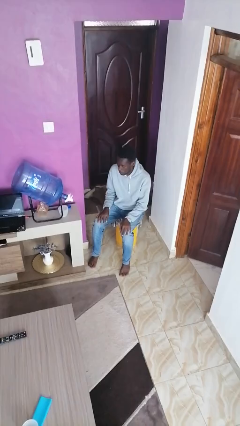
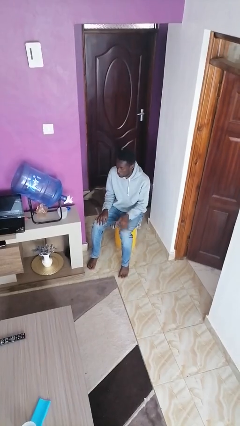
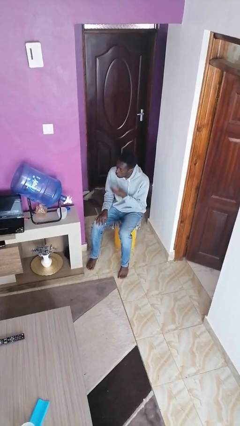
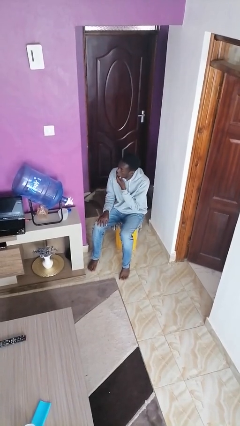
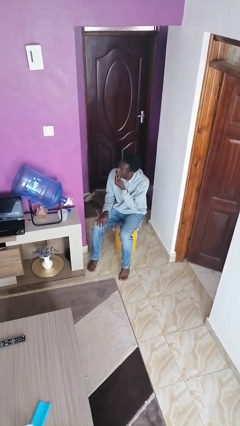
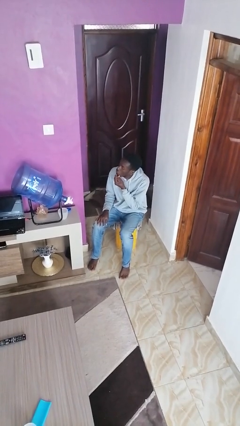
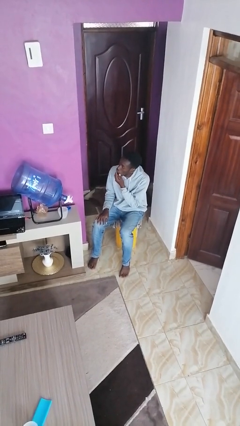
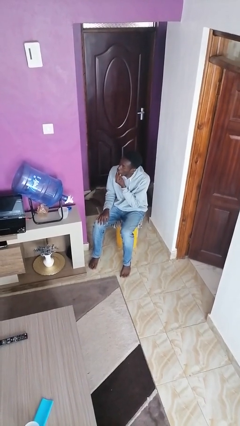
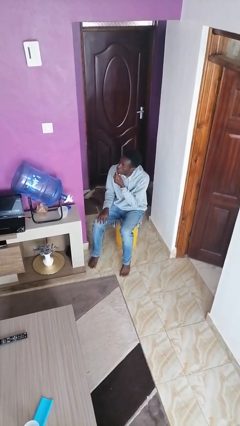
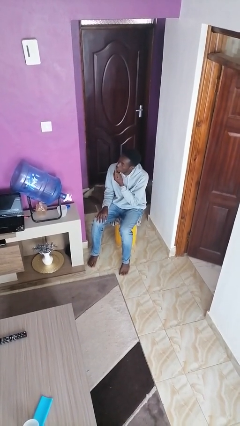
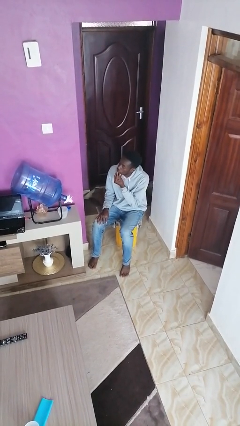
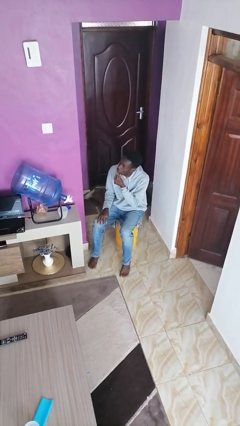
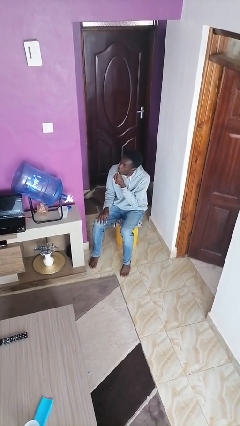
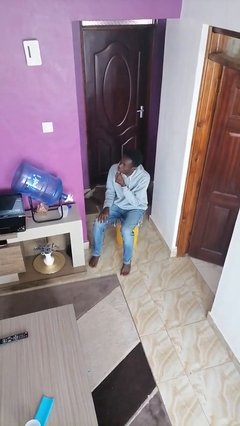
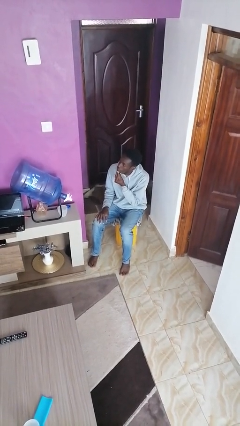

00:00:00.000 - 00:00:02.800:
person strokes chin

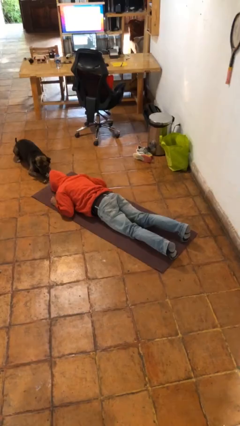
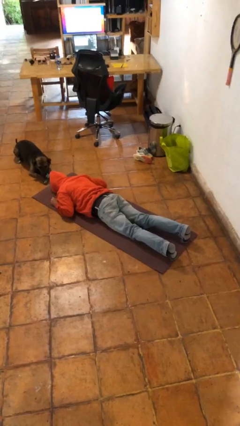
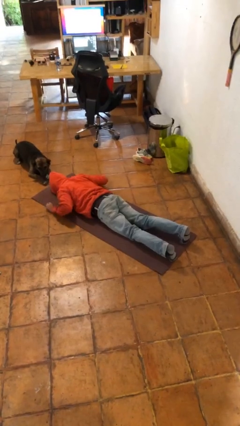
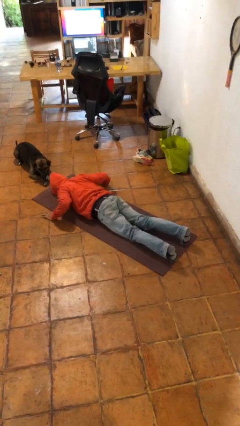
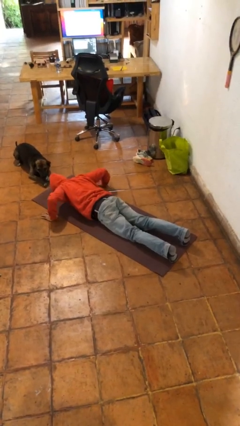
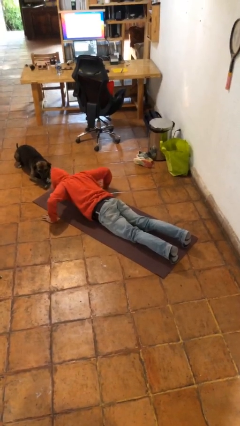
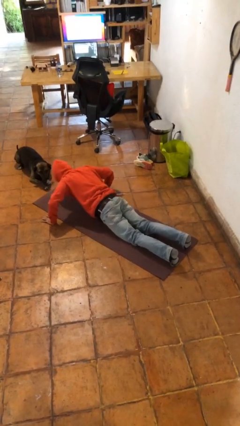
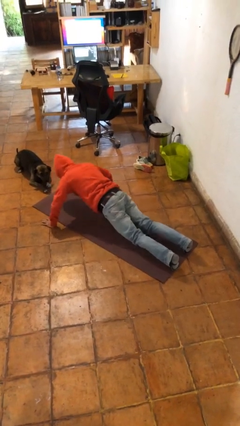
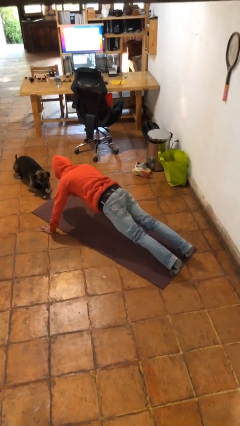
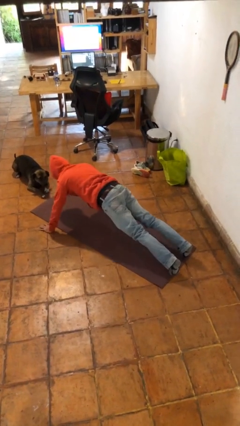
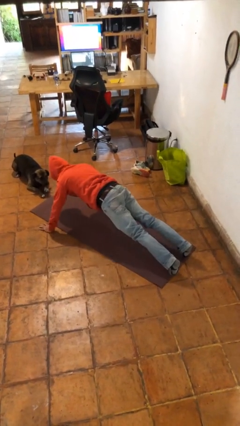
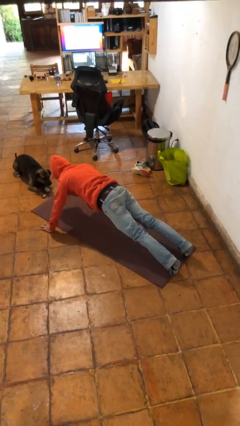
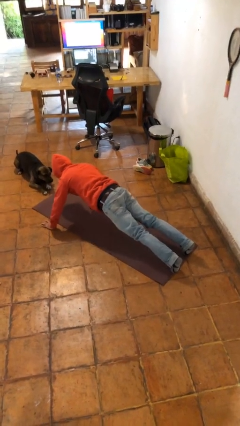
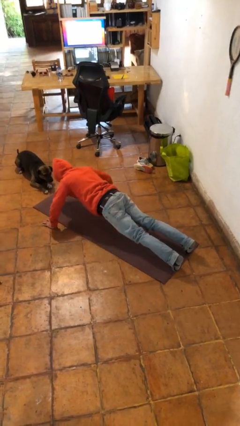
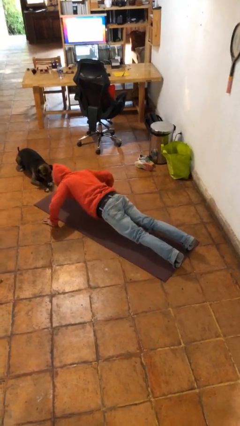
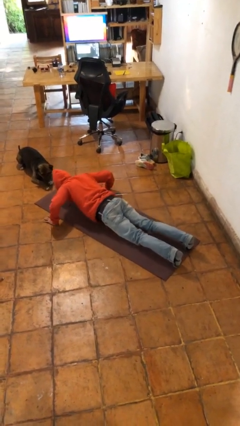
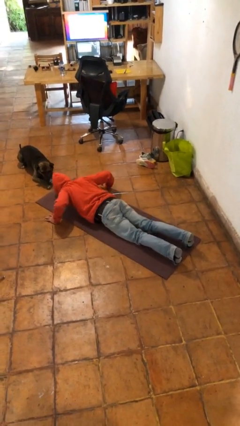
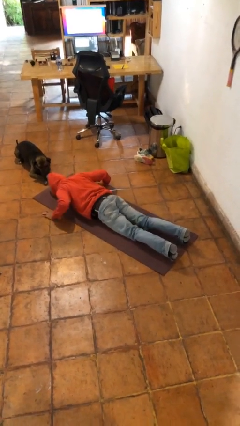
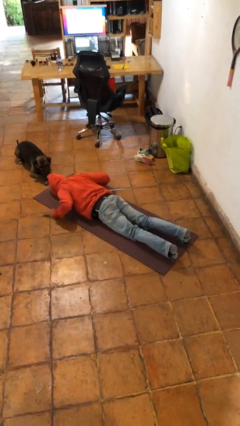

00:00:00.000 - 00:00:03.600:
person exercises with pushup

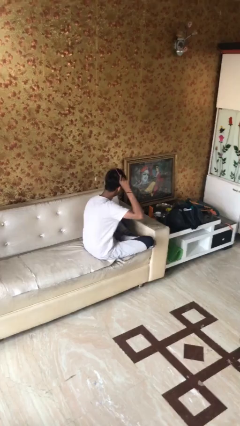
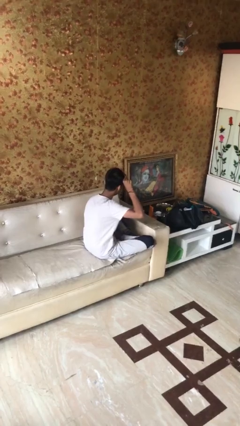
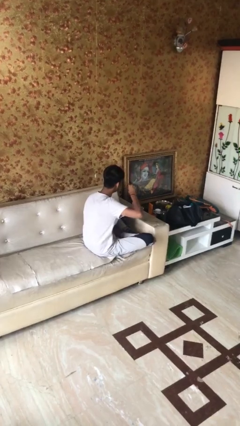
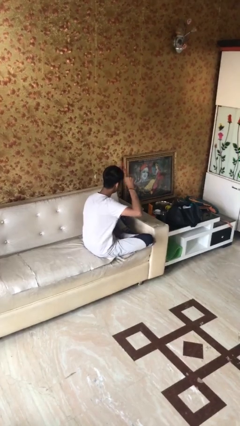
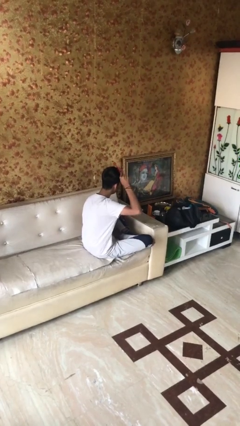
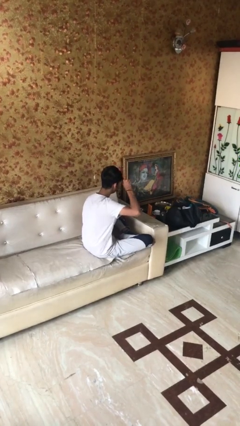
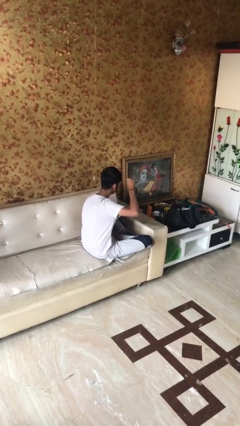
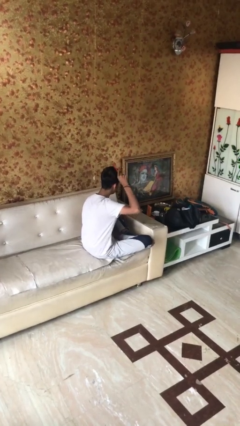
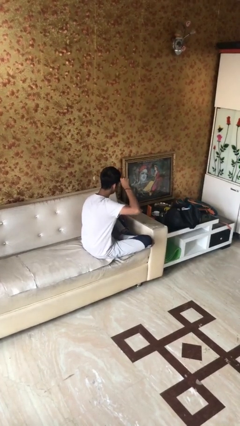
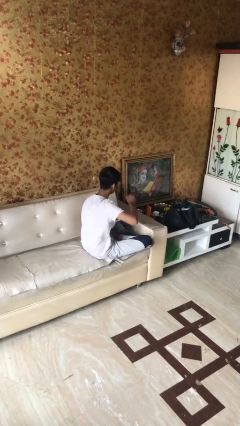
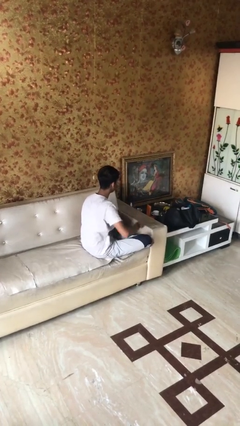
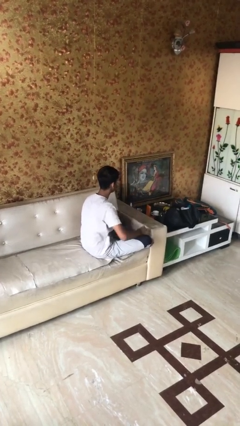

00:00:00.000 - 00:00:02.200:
person brushes hair

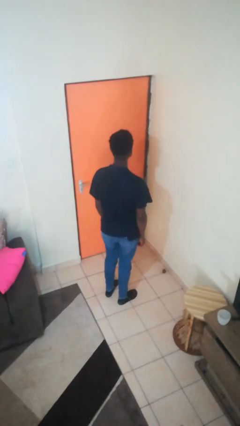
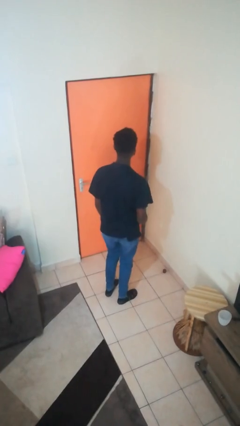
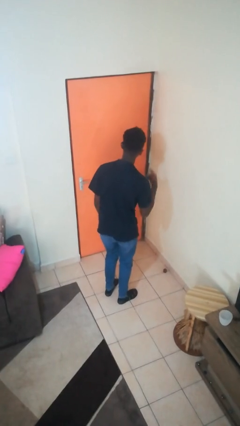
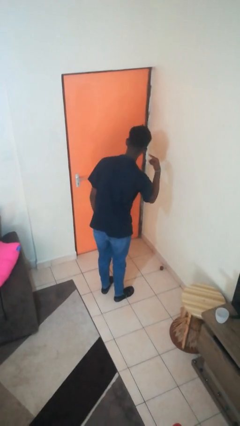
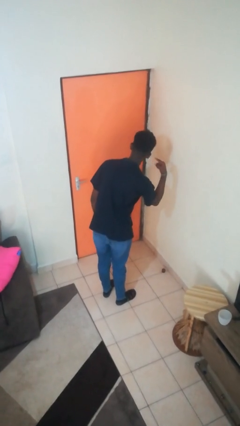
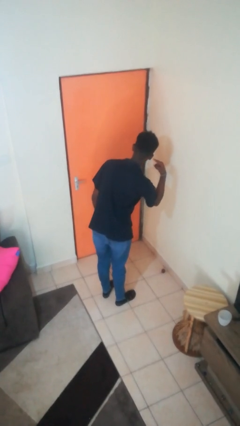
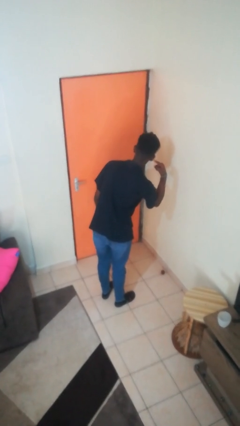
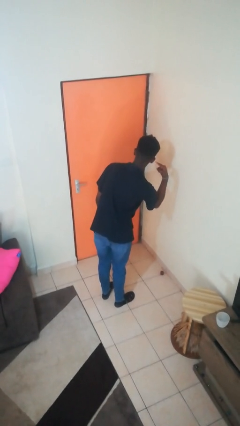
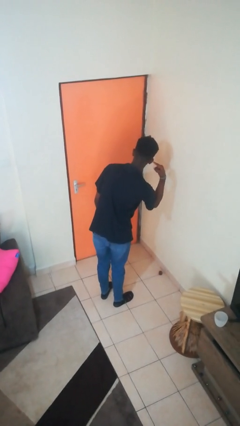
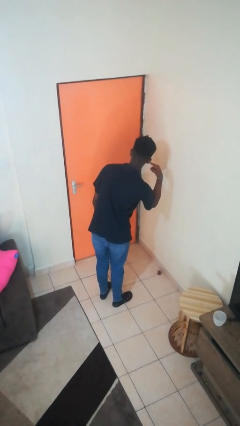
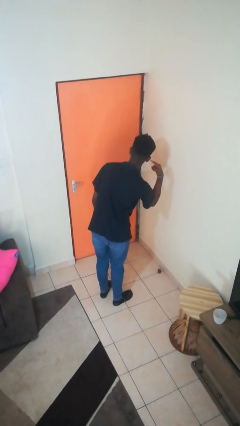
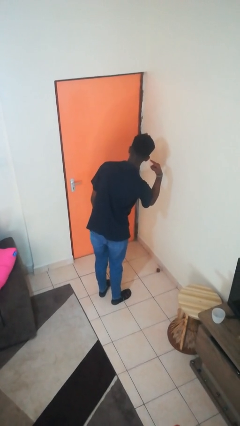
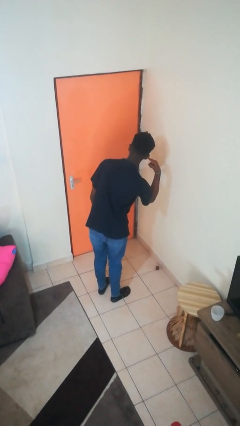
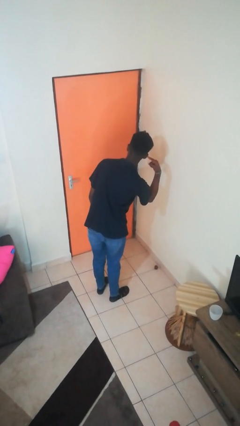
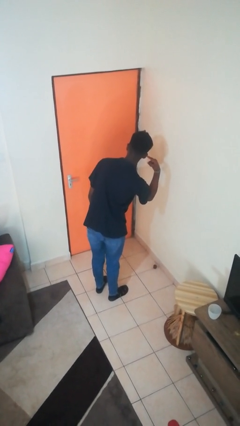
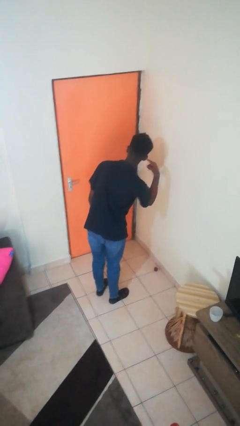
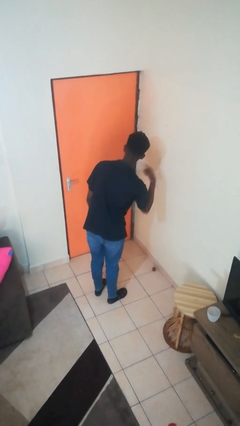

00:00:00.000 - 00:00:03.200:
person gestures listen closely

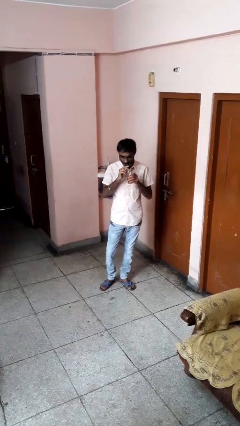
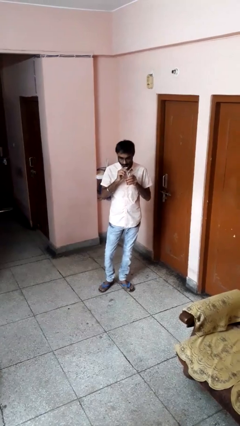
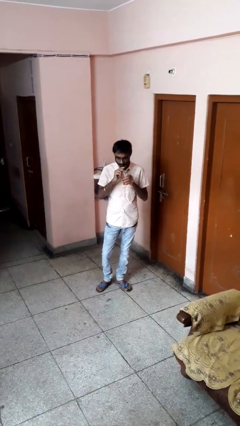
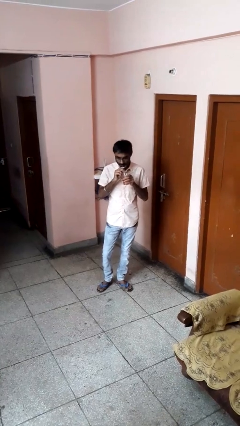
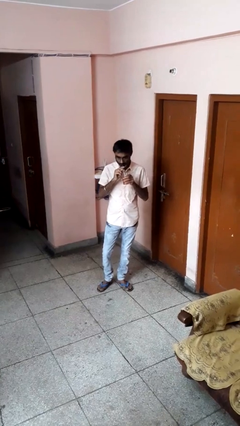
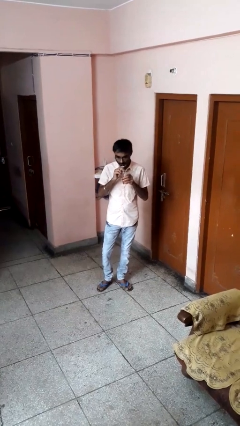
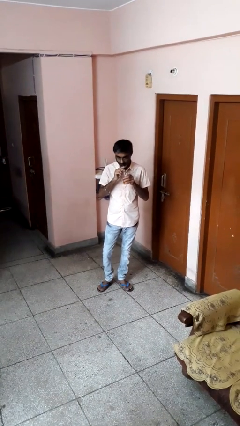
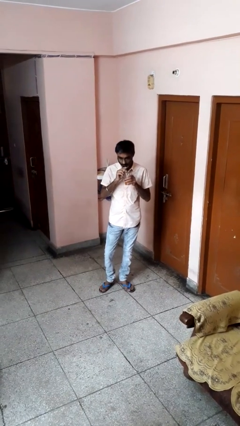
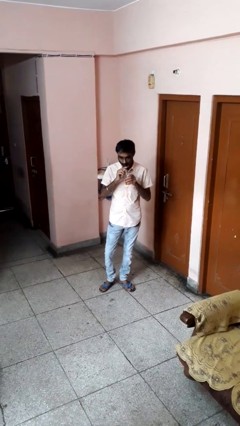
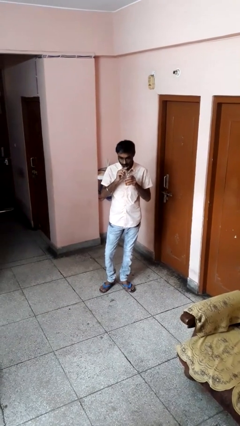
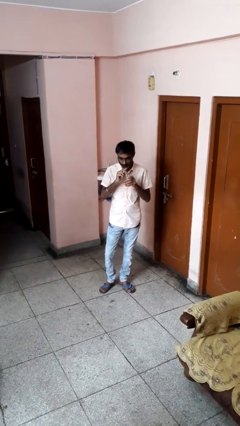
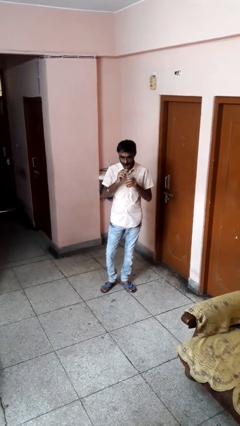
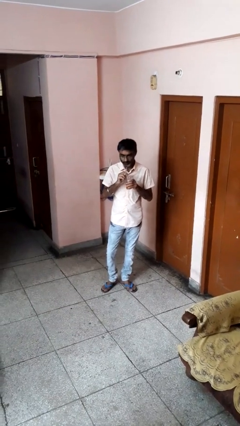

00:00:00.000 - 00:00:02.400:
person drinks from straw

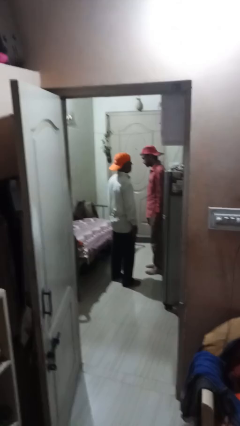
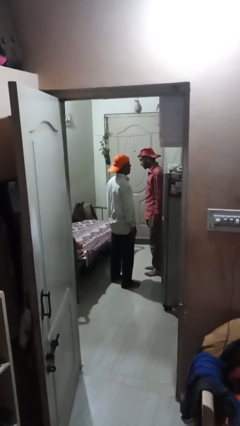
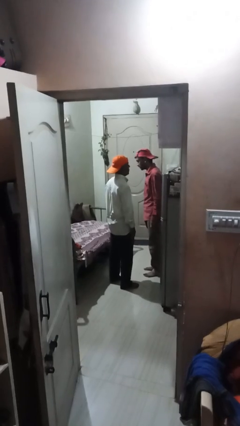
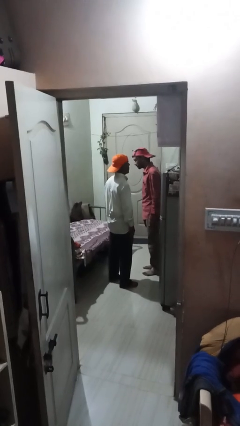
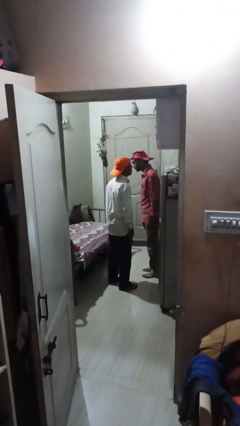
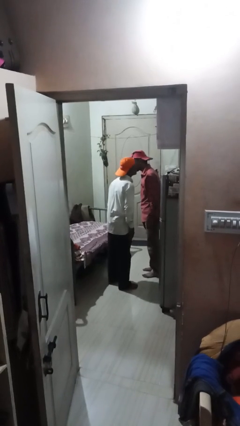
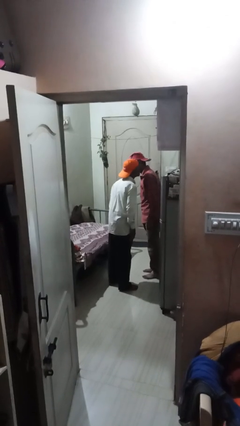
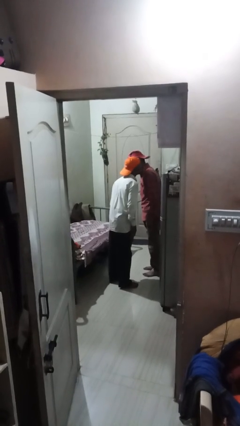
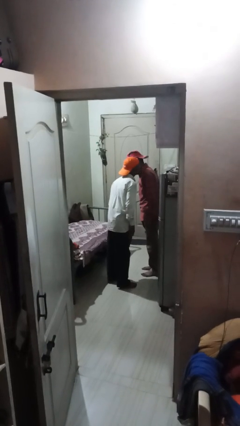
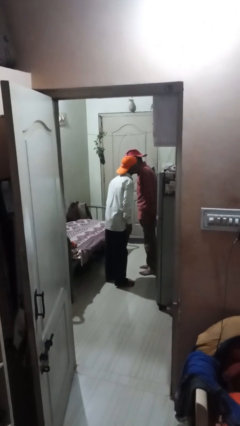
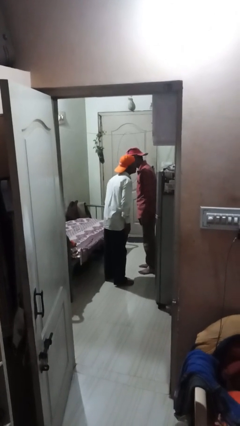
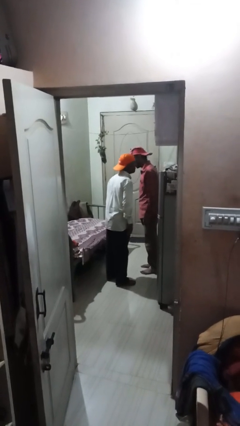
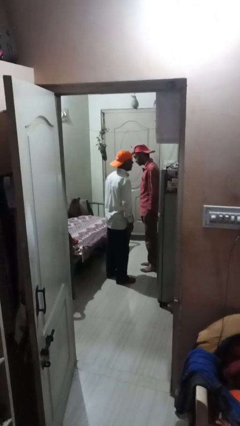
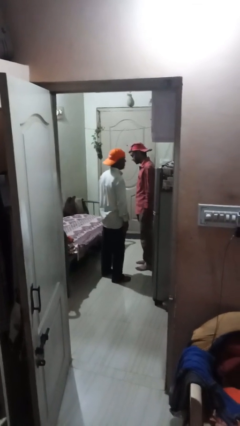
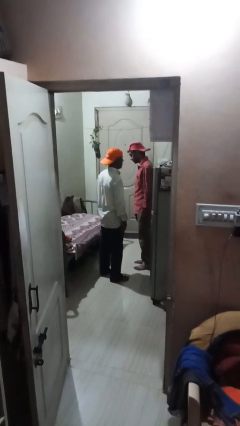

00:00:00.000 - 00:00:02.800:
person kisses cheek of person

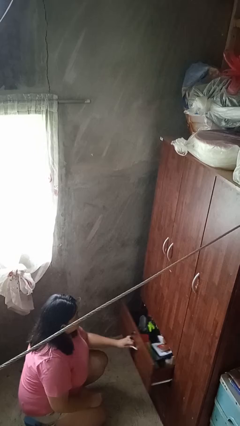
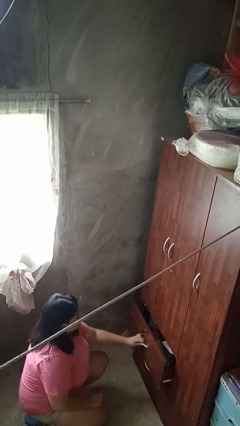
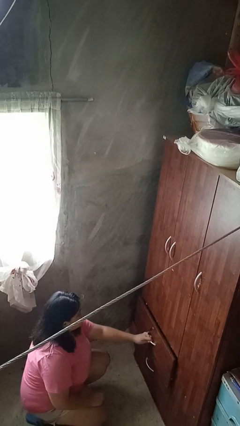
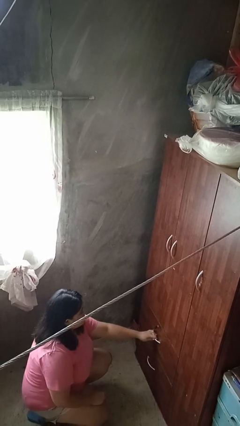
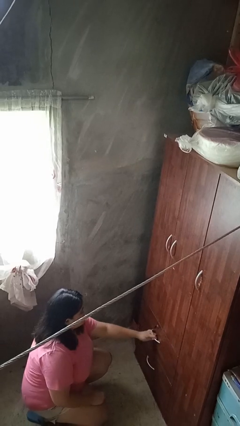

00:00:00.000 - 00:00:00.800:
person closes dresser drawer
